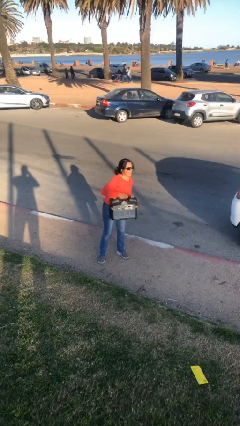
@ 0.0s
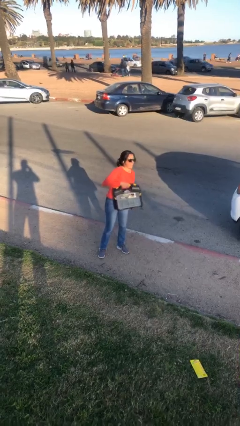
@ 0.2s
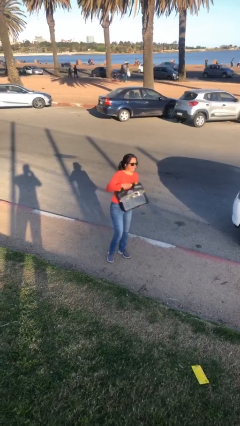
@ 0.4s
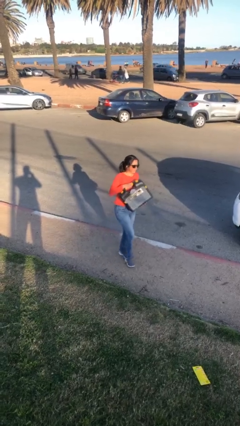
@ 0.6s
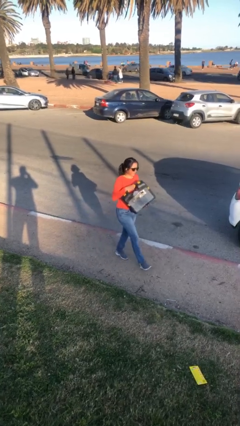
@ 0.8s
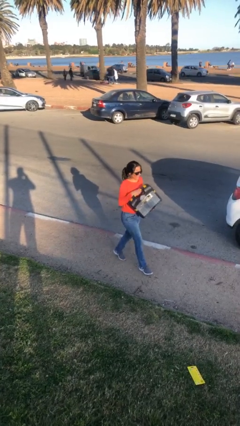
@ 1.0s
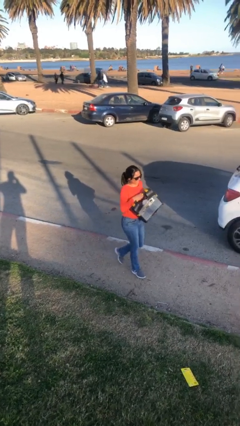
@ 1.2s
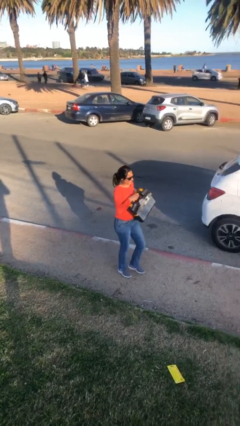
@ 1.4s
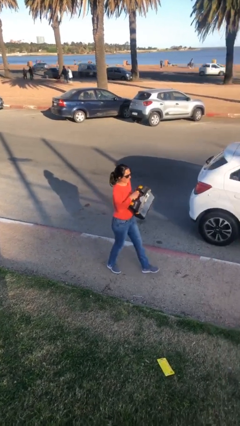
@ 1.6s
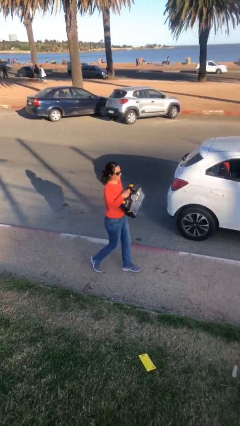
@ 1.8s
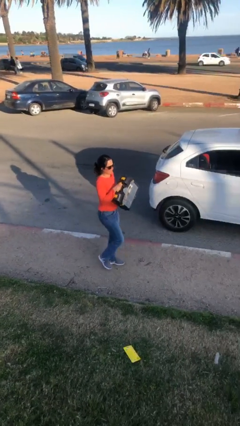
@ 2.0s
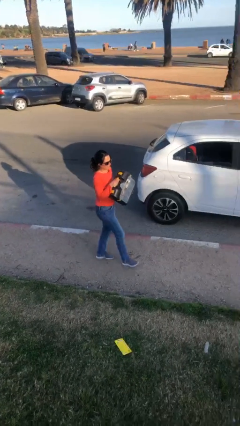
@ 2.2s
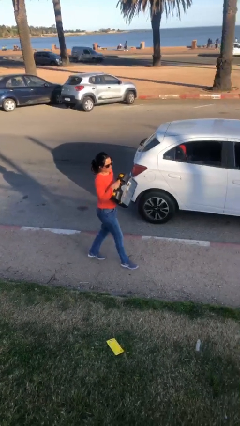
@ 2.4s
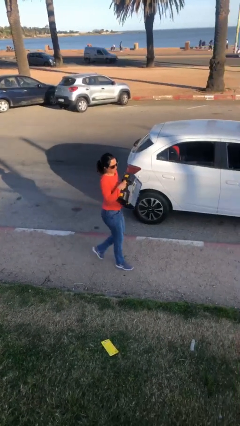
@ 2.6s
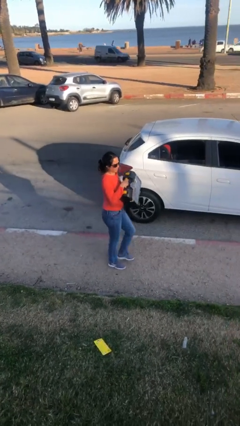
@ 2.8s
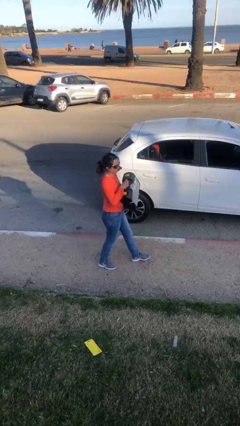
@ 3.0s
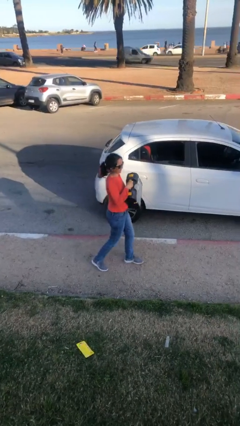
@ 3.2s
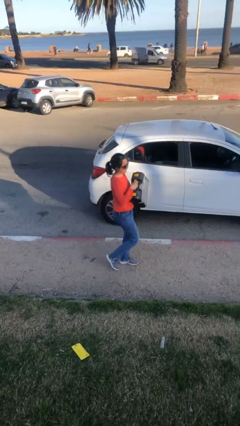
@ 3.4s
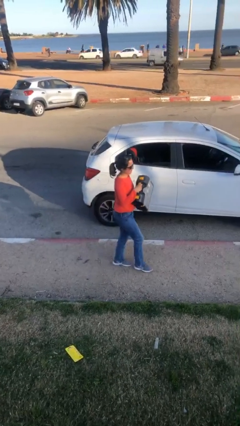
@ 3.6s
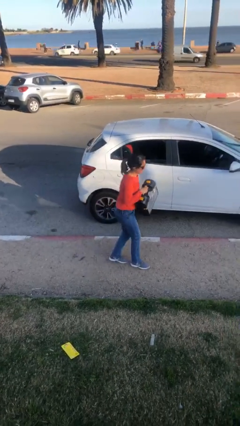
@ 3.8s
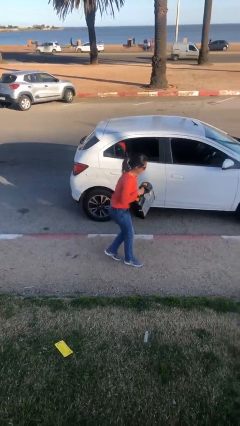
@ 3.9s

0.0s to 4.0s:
person carries heavy object

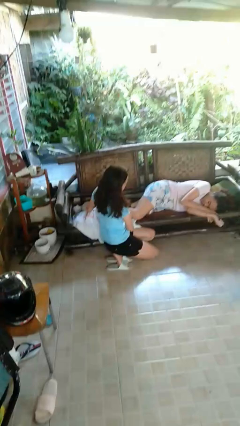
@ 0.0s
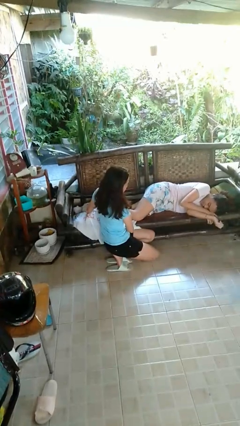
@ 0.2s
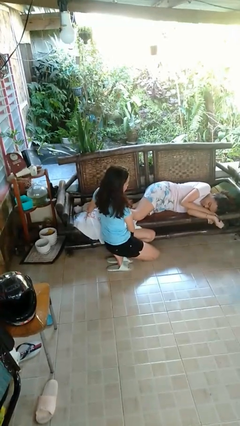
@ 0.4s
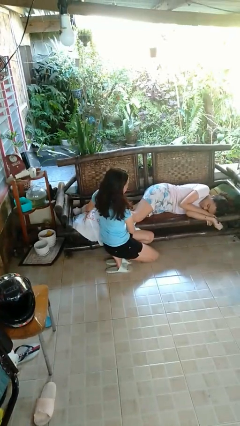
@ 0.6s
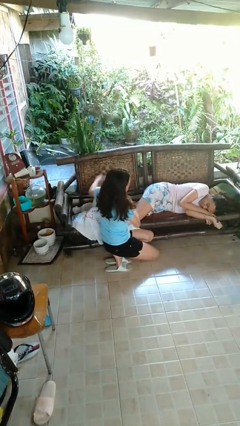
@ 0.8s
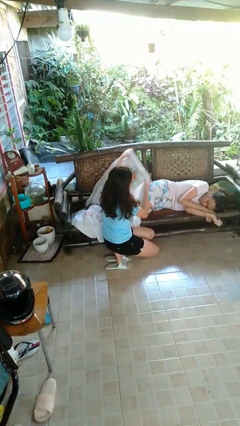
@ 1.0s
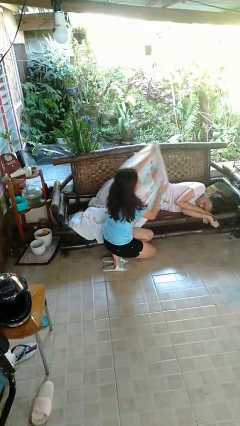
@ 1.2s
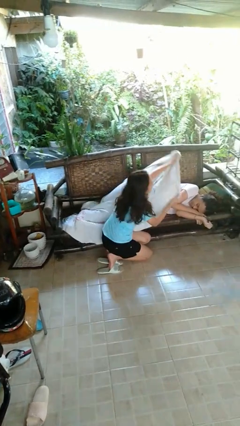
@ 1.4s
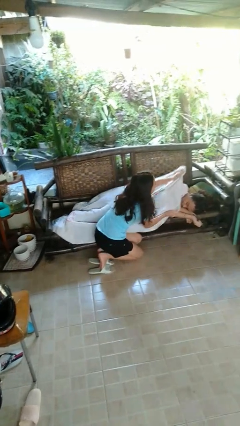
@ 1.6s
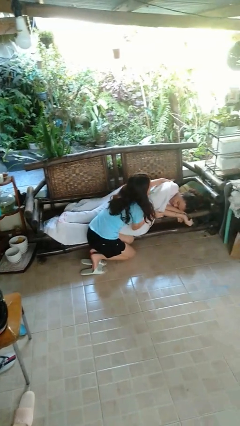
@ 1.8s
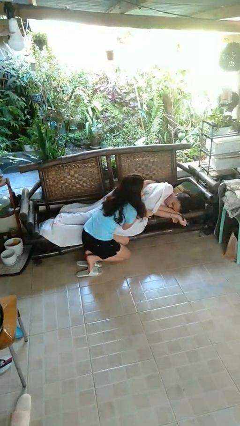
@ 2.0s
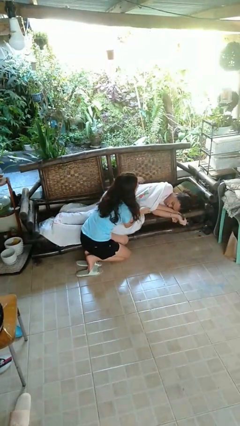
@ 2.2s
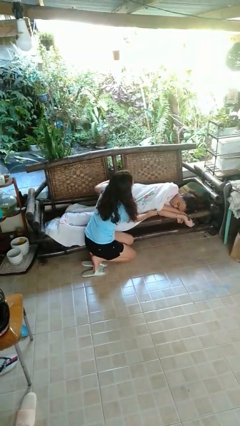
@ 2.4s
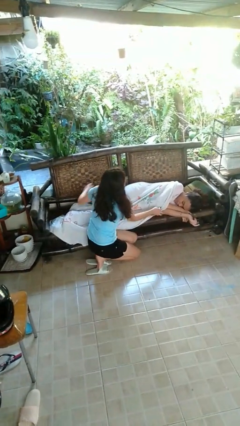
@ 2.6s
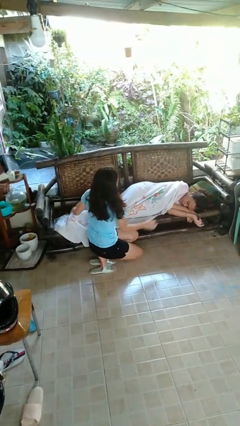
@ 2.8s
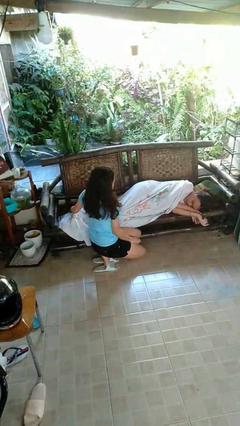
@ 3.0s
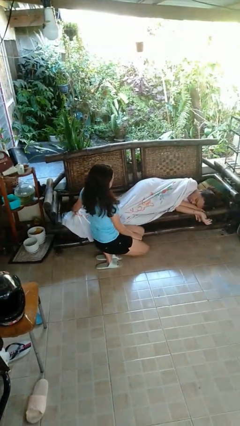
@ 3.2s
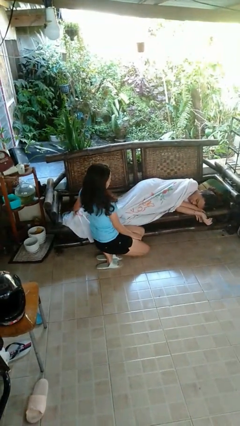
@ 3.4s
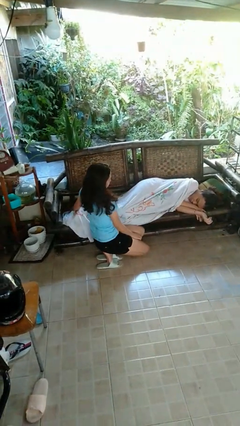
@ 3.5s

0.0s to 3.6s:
person covers friend with blanket

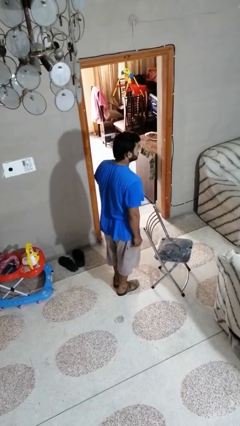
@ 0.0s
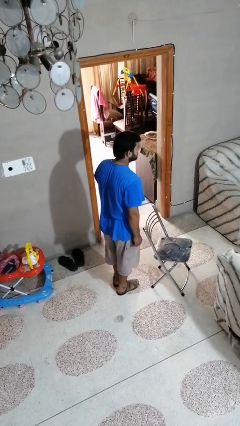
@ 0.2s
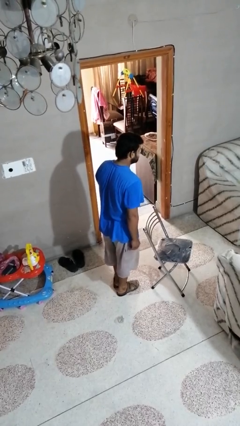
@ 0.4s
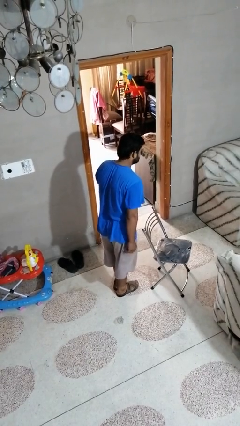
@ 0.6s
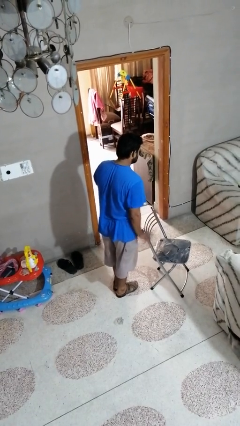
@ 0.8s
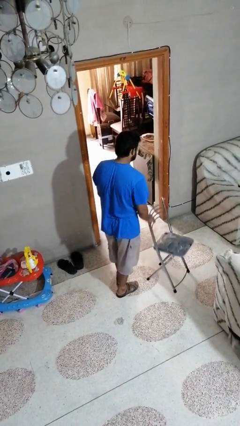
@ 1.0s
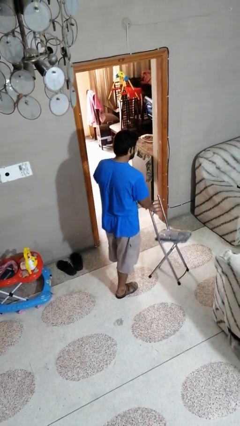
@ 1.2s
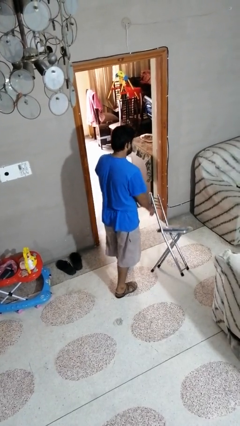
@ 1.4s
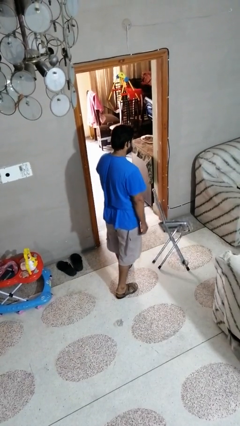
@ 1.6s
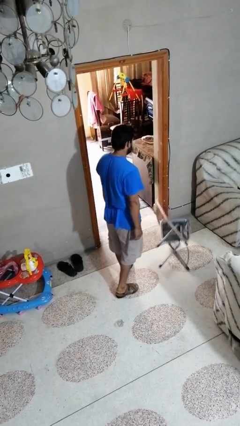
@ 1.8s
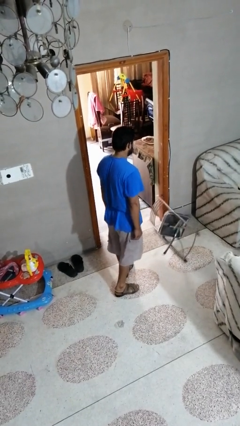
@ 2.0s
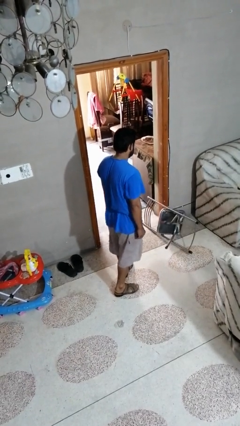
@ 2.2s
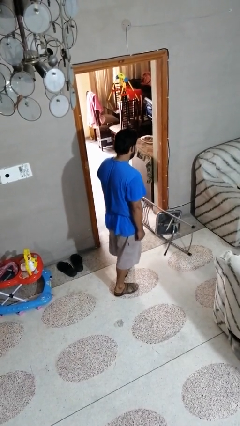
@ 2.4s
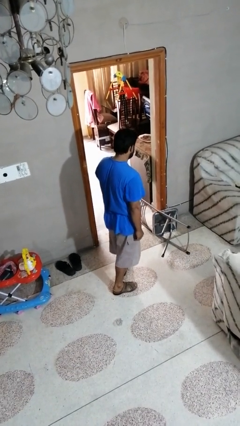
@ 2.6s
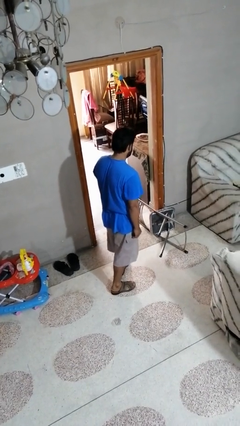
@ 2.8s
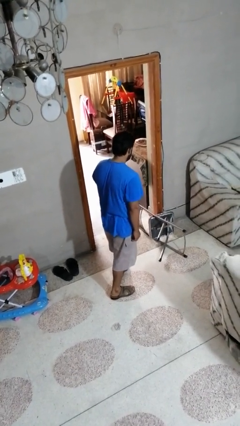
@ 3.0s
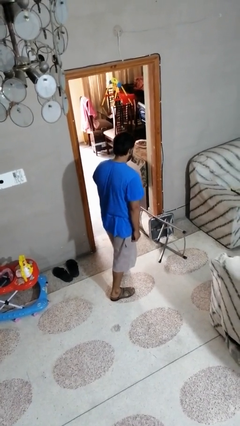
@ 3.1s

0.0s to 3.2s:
person knocks over furniture

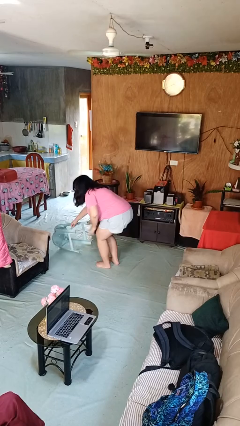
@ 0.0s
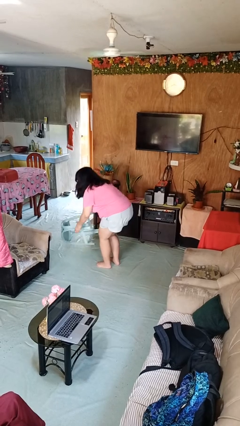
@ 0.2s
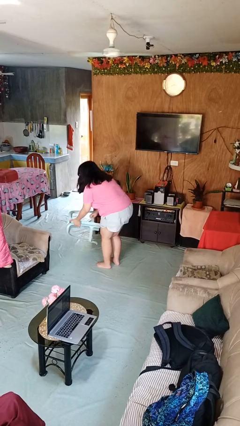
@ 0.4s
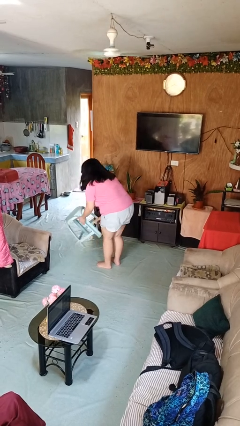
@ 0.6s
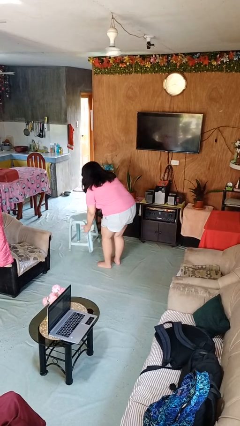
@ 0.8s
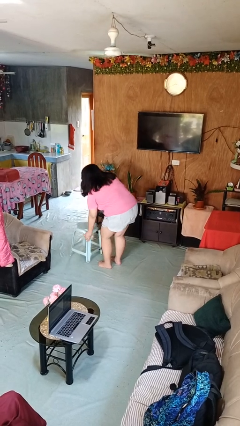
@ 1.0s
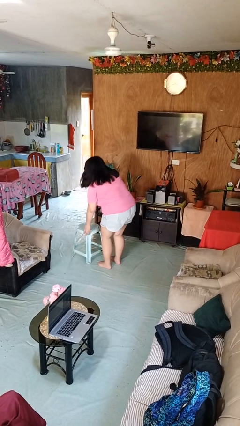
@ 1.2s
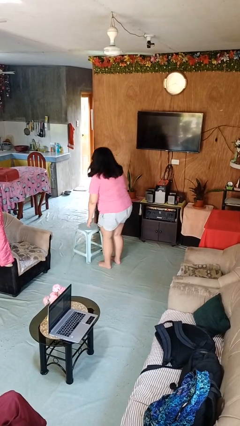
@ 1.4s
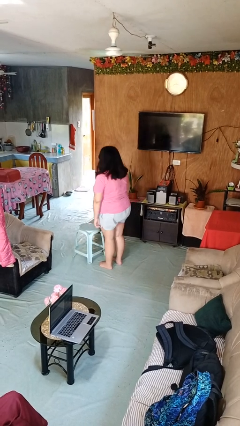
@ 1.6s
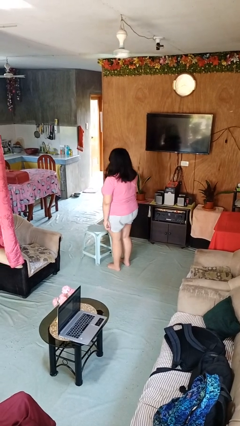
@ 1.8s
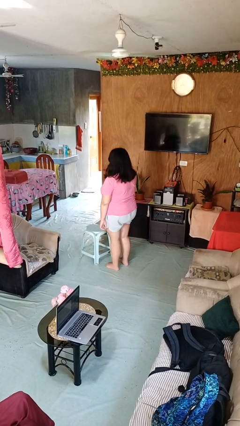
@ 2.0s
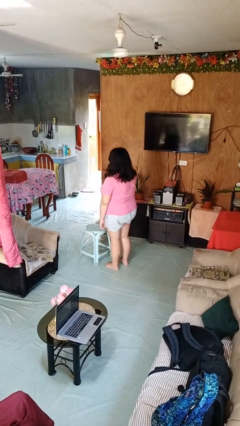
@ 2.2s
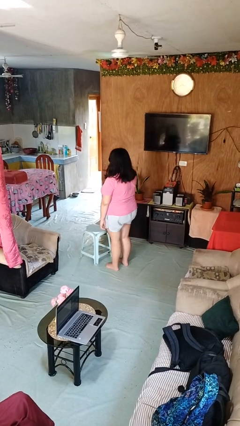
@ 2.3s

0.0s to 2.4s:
person sets upright furniture

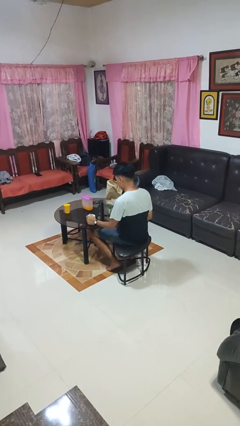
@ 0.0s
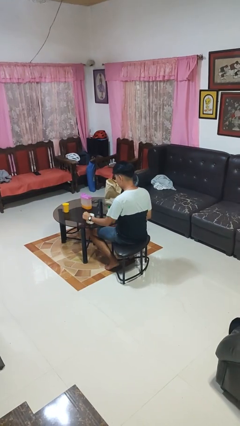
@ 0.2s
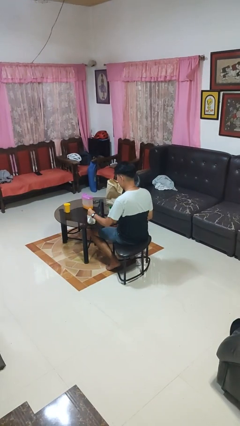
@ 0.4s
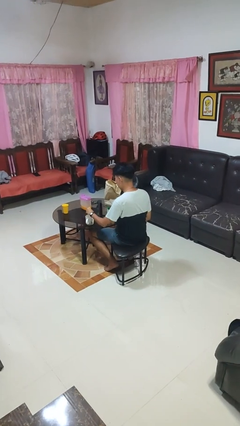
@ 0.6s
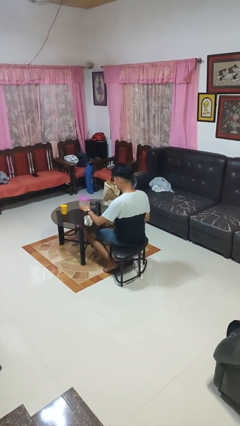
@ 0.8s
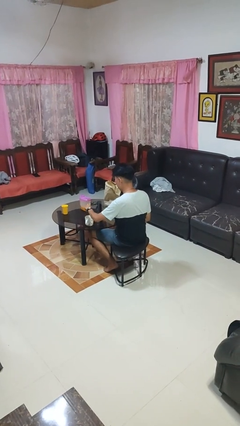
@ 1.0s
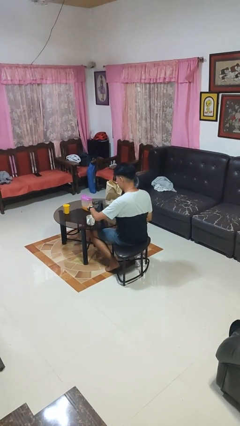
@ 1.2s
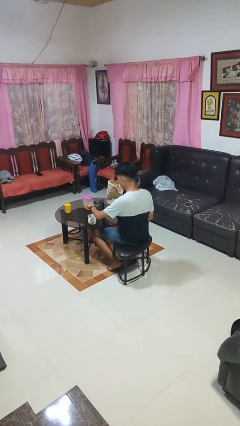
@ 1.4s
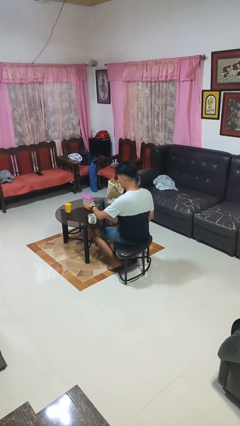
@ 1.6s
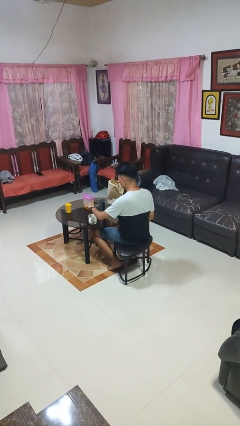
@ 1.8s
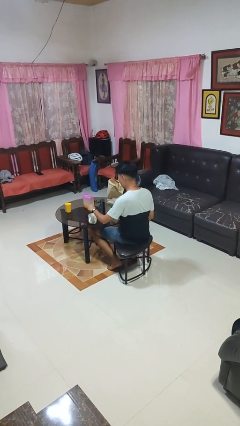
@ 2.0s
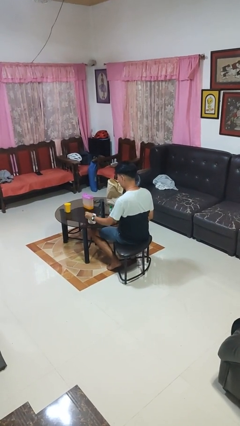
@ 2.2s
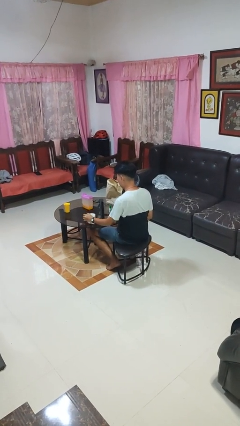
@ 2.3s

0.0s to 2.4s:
person stirs mug

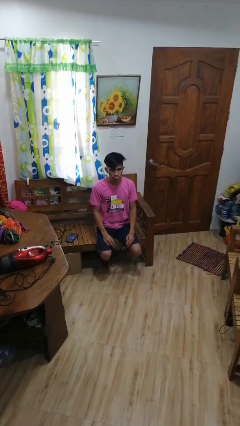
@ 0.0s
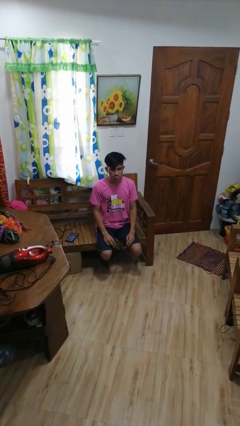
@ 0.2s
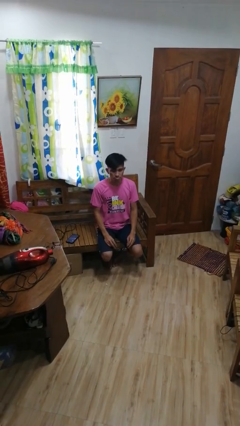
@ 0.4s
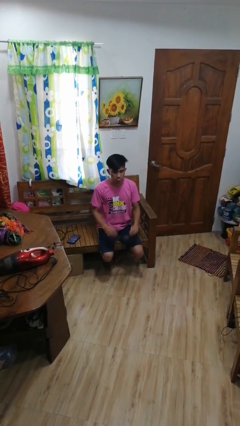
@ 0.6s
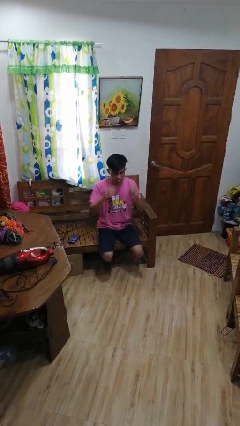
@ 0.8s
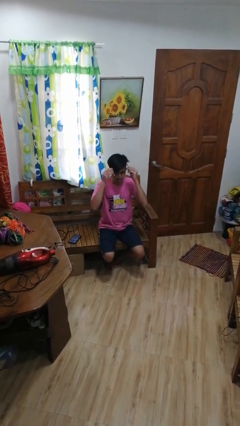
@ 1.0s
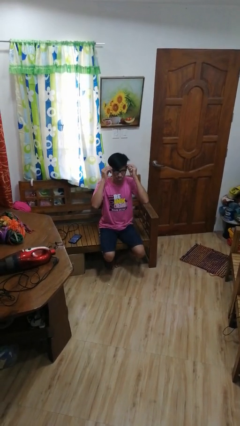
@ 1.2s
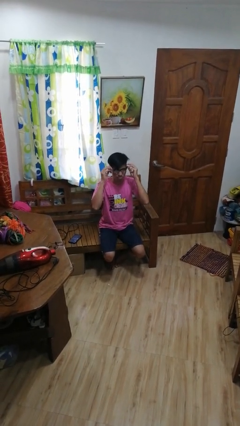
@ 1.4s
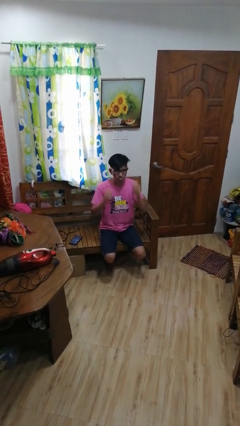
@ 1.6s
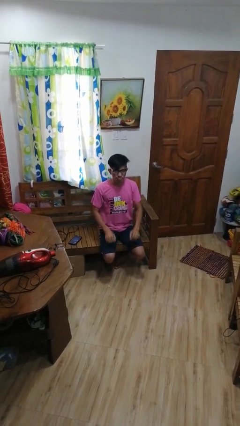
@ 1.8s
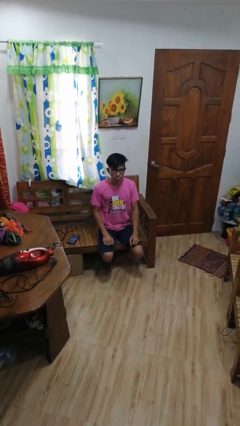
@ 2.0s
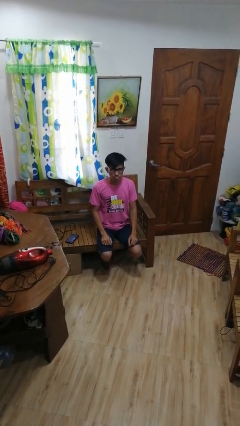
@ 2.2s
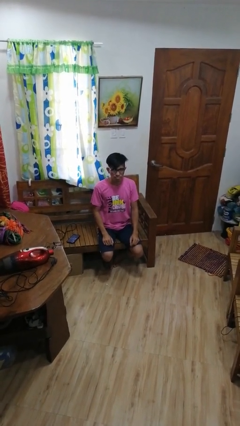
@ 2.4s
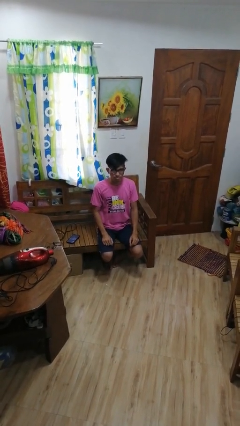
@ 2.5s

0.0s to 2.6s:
person puts on glasses
